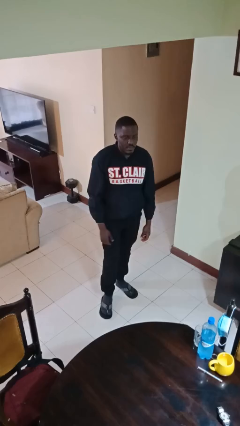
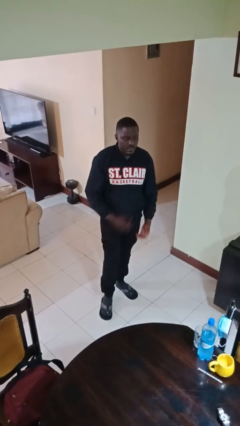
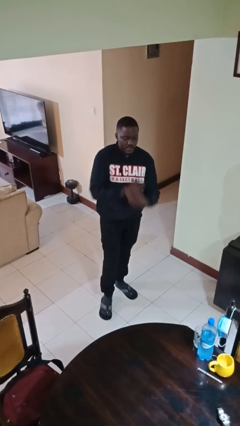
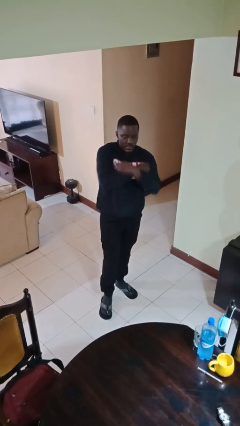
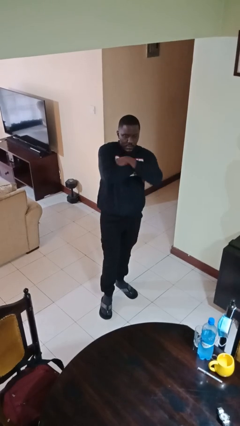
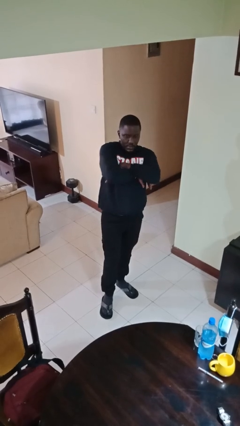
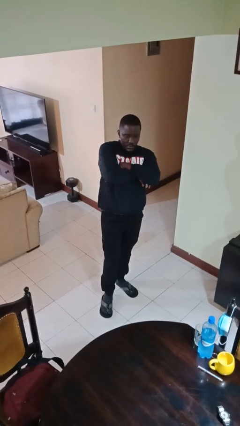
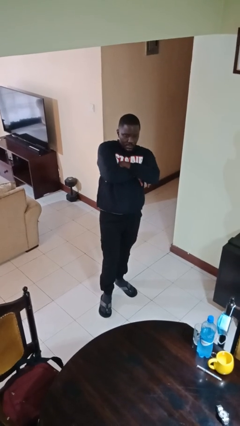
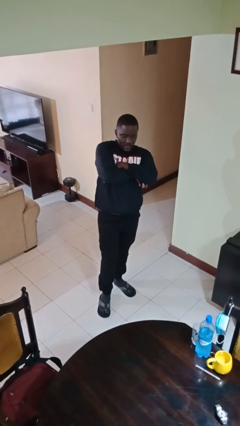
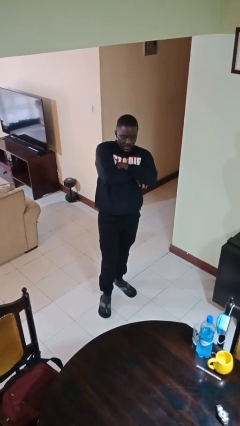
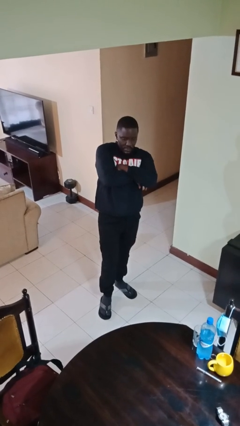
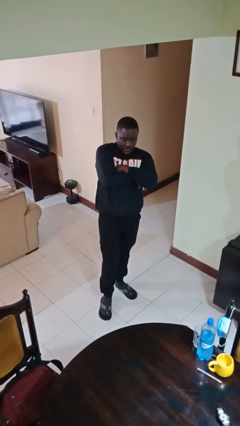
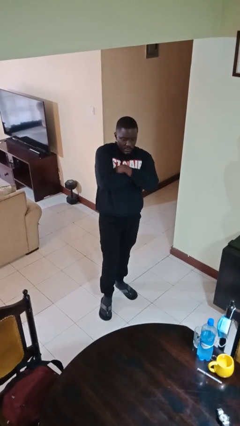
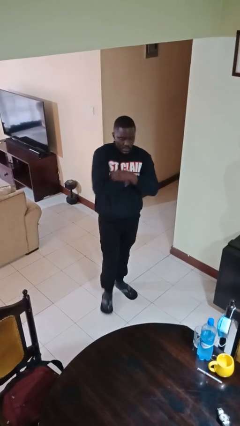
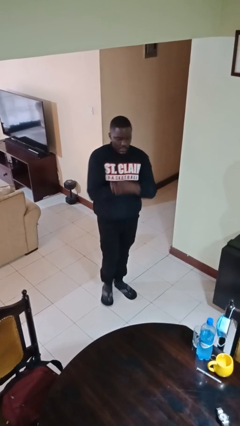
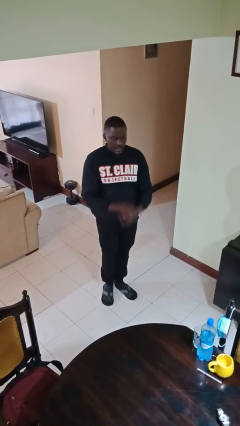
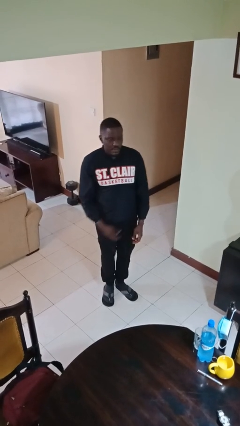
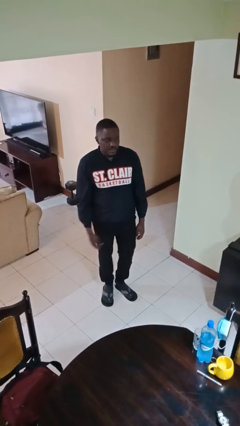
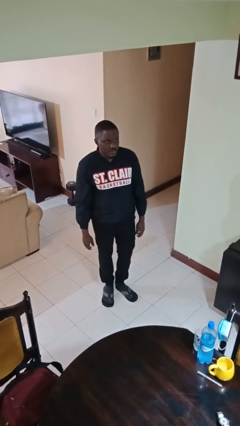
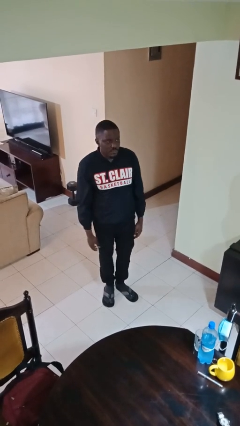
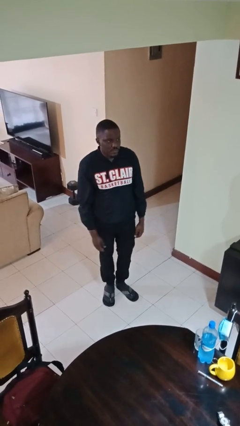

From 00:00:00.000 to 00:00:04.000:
person crosses arms

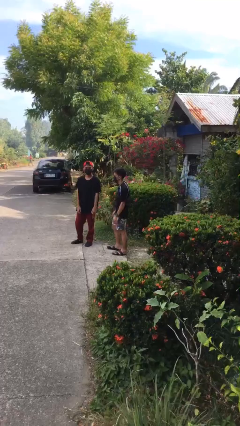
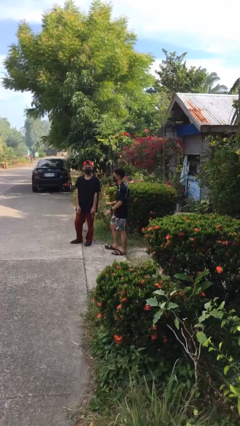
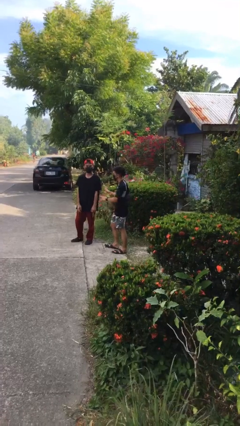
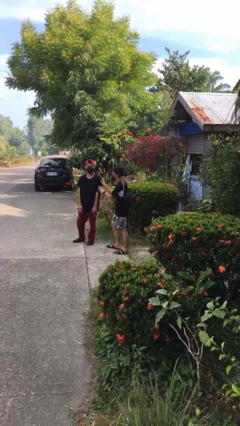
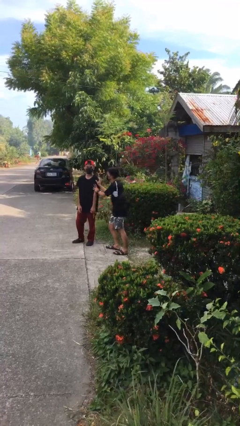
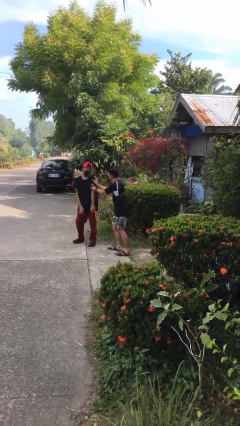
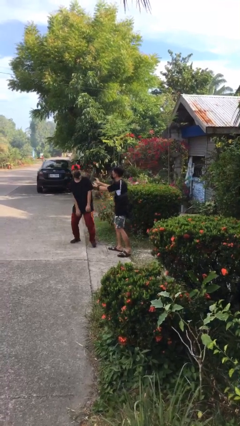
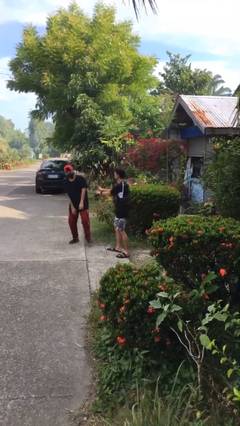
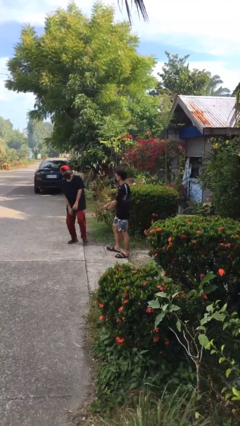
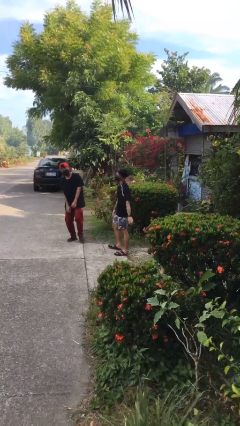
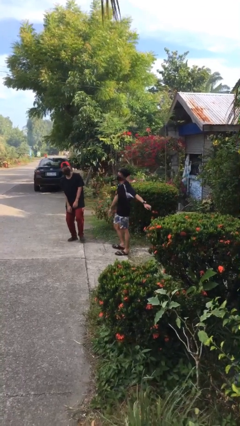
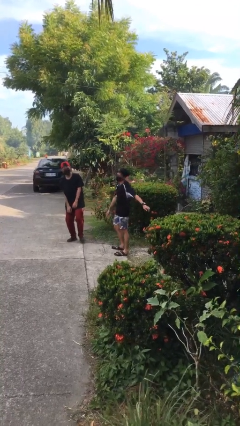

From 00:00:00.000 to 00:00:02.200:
person shoves person

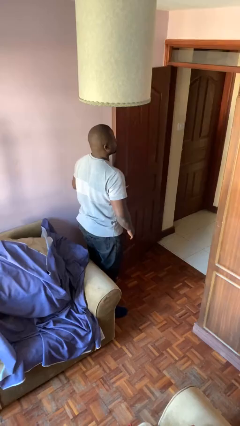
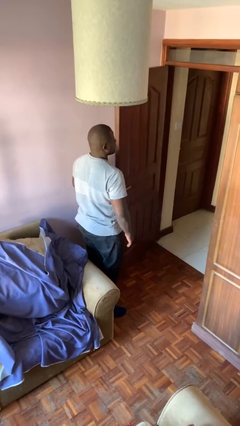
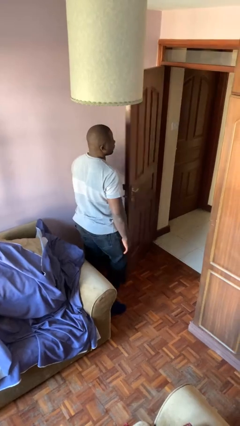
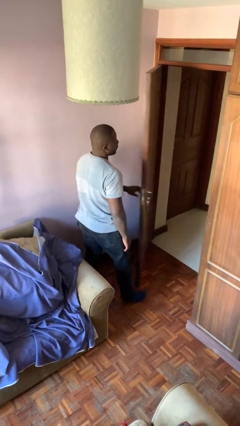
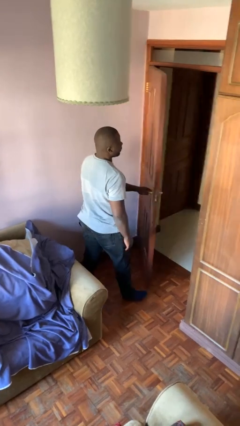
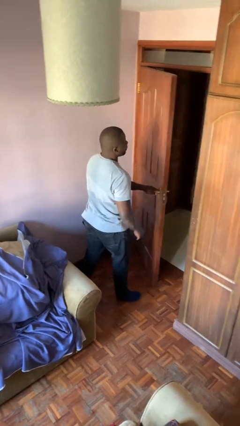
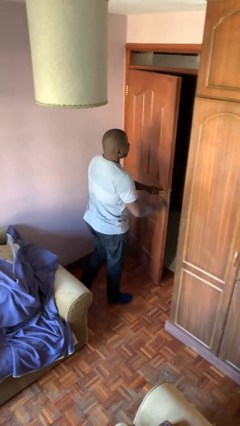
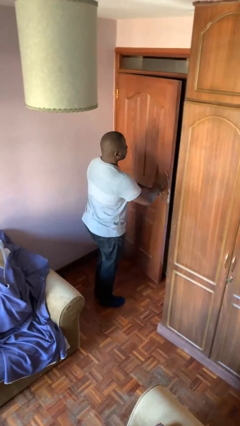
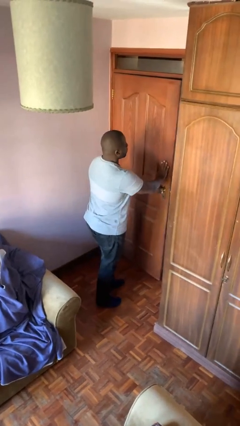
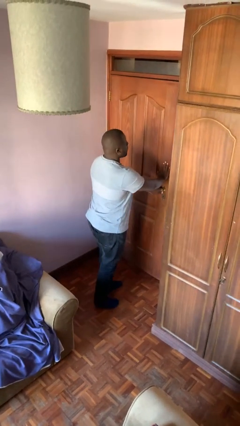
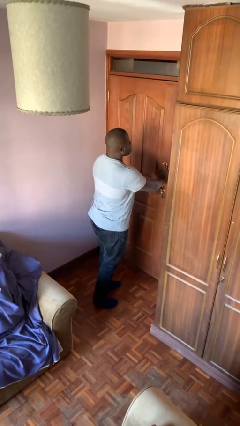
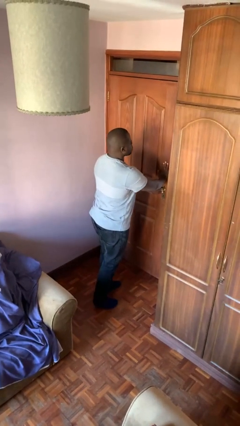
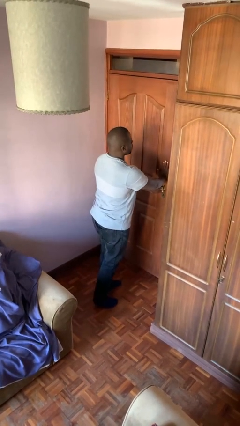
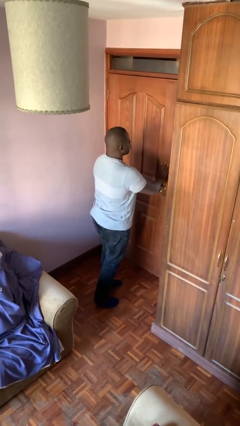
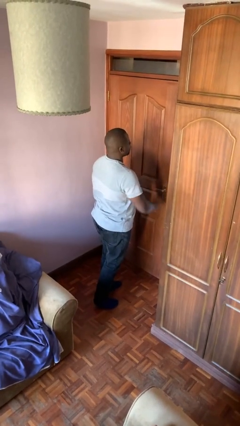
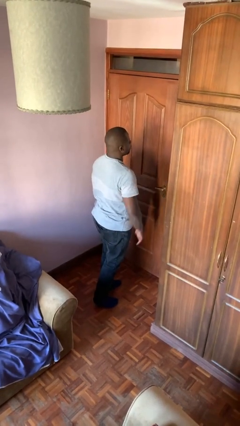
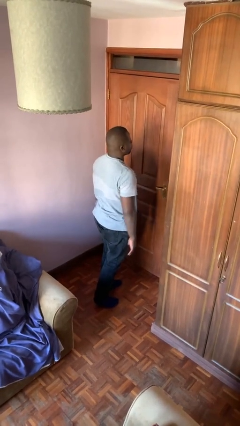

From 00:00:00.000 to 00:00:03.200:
person closes facility door

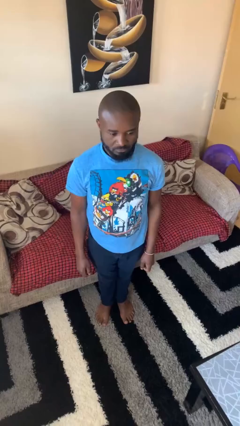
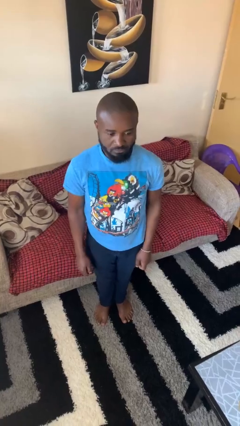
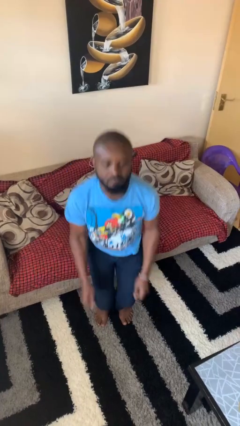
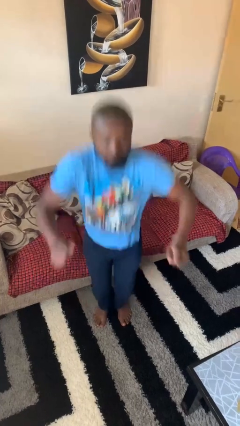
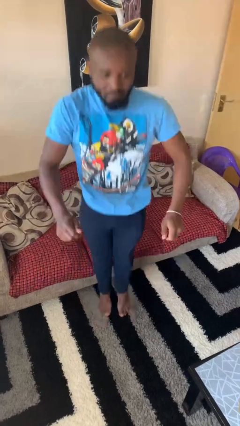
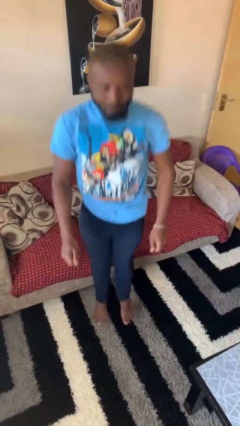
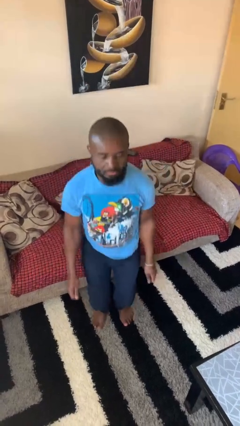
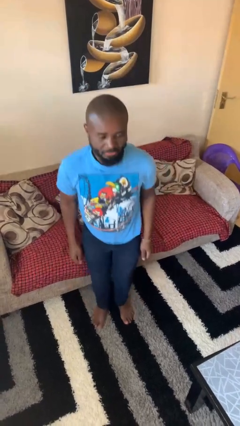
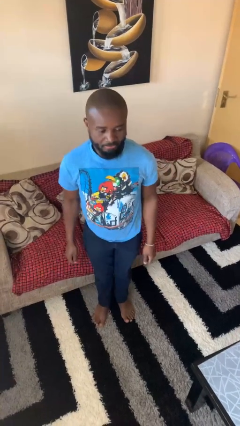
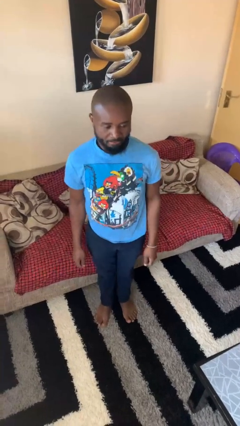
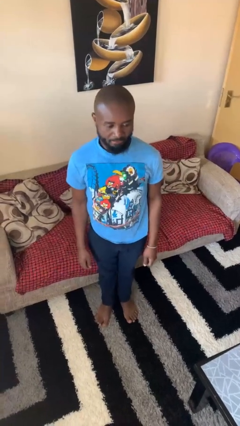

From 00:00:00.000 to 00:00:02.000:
person jumps

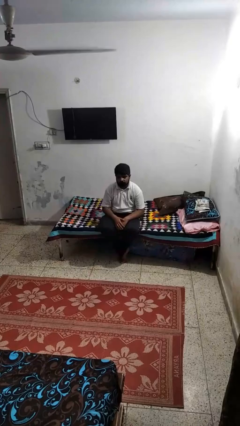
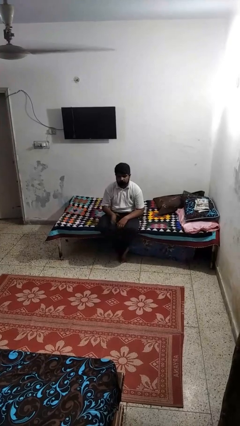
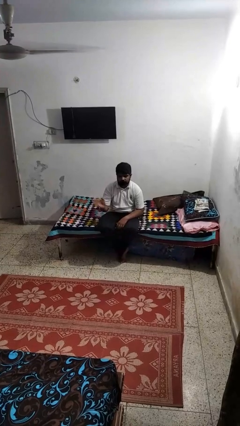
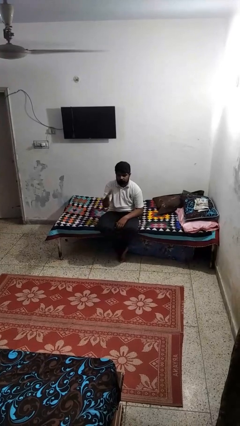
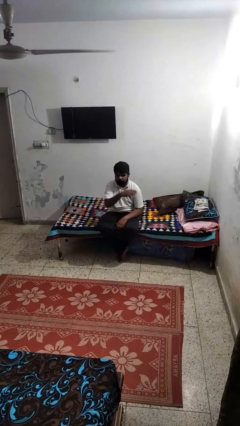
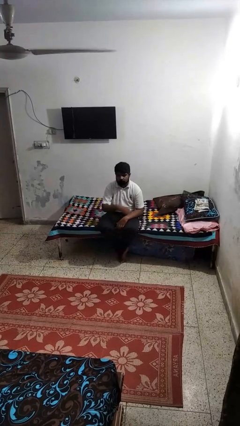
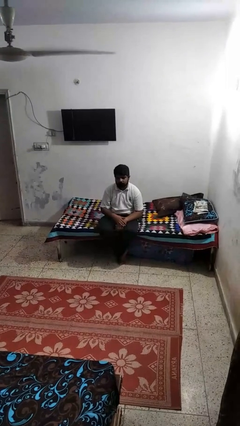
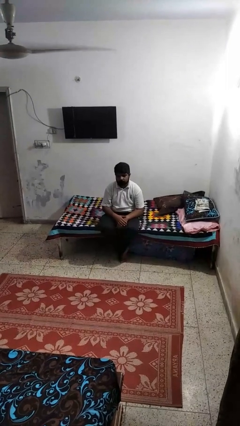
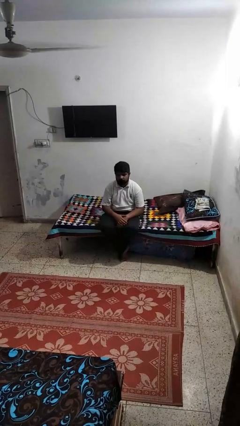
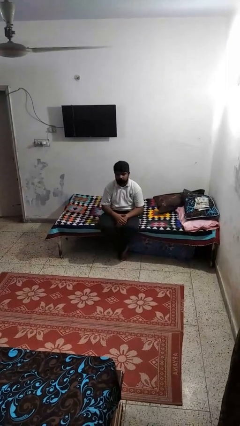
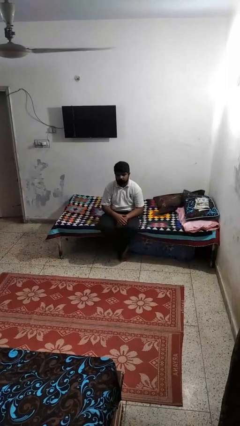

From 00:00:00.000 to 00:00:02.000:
person gestures swipe left

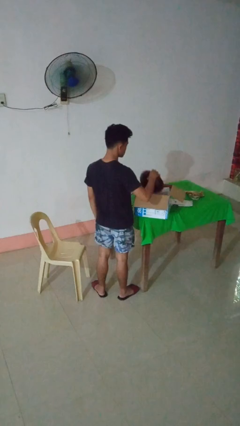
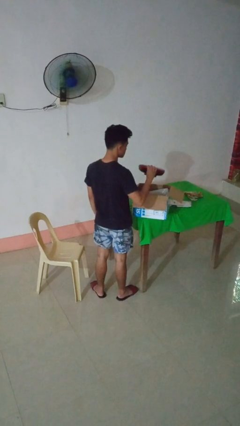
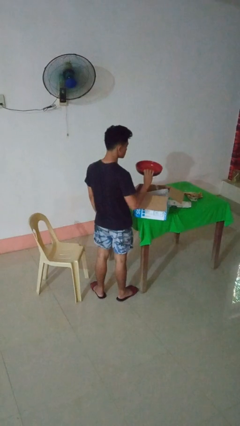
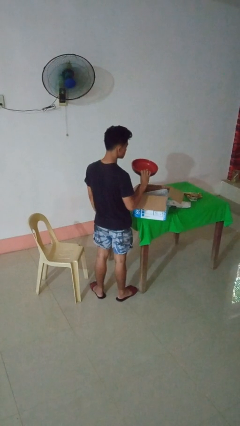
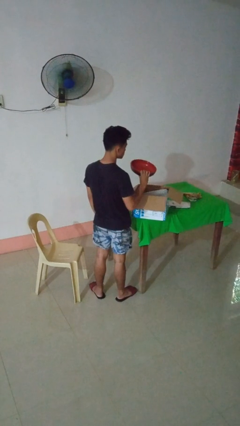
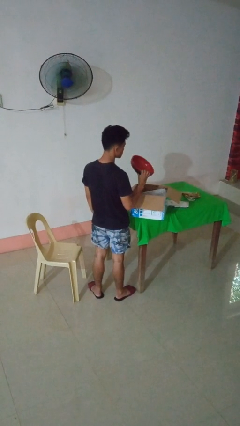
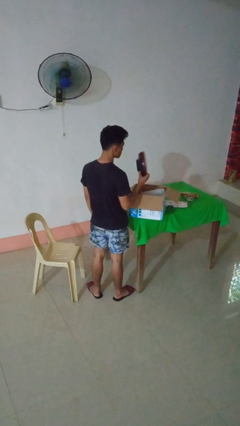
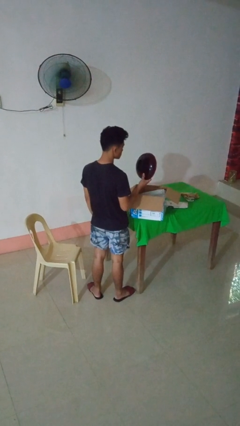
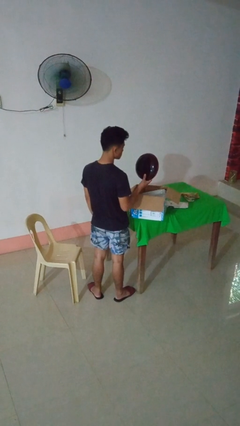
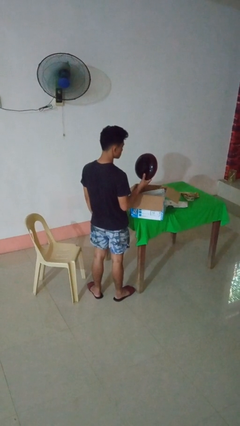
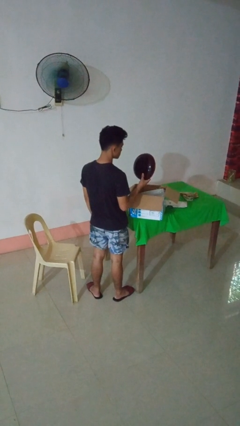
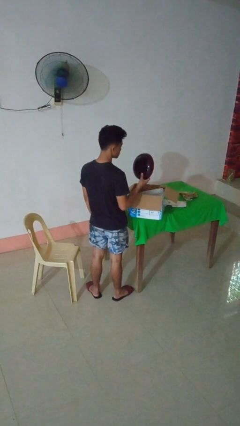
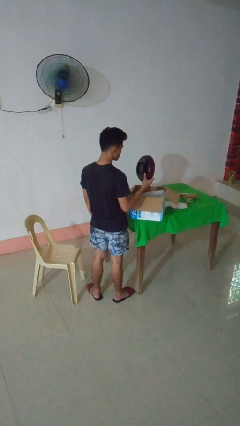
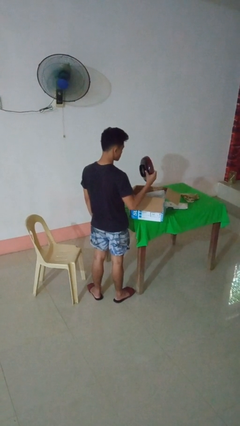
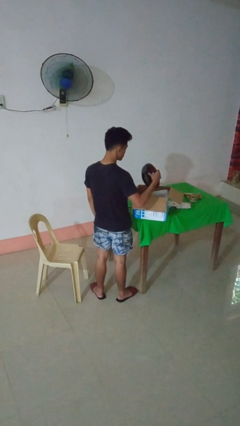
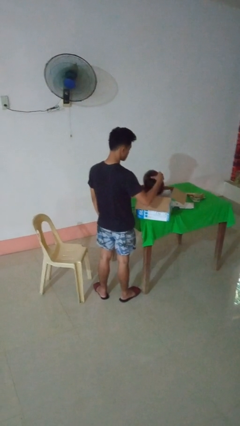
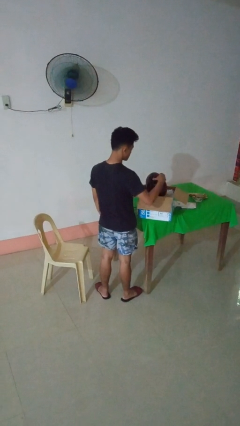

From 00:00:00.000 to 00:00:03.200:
person takes object from box

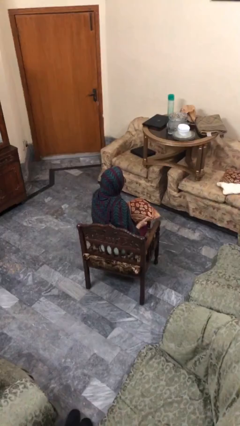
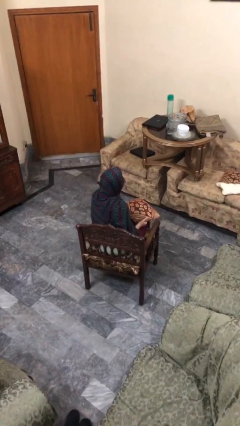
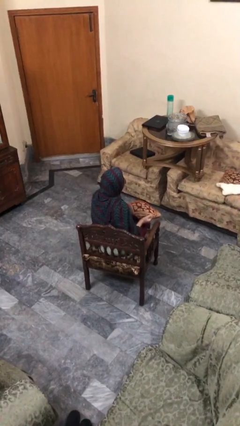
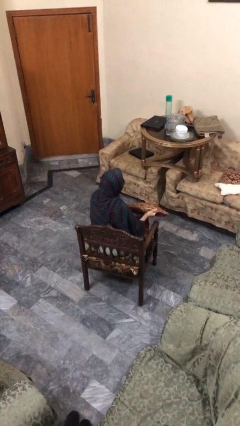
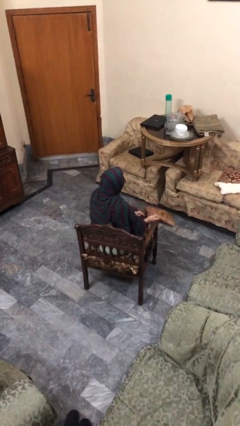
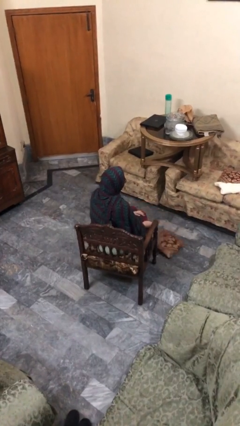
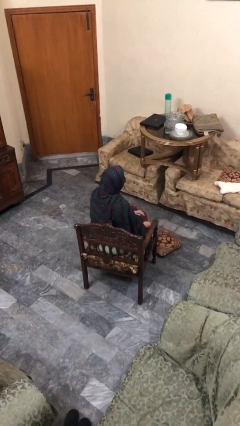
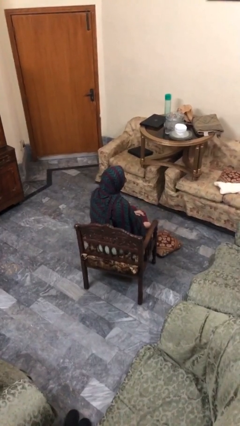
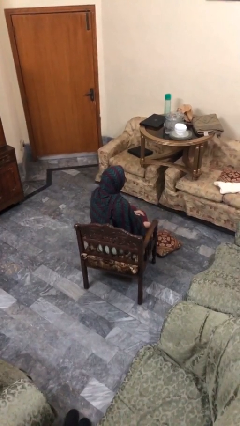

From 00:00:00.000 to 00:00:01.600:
person drops object
